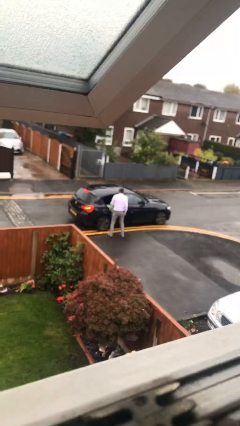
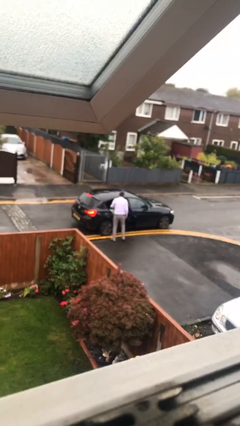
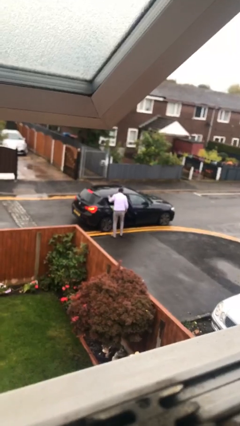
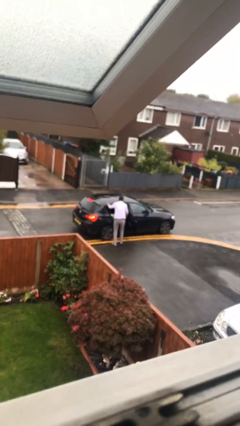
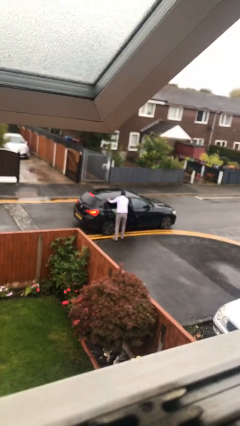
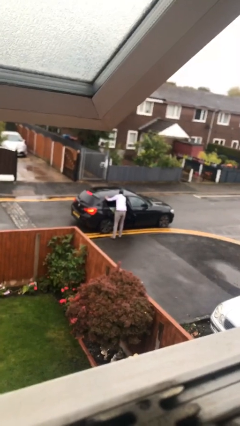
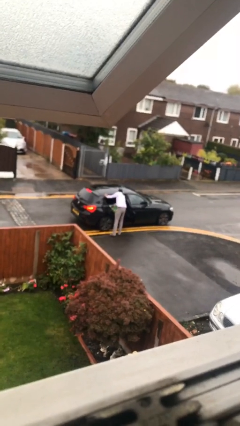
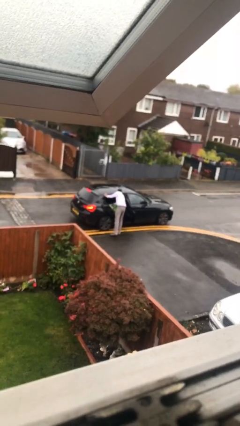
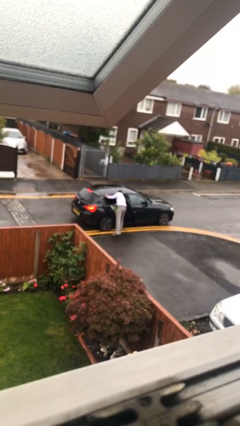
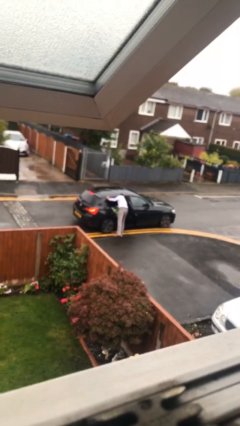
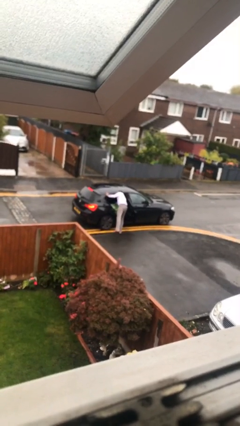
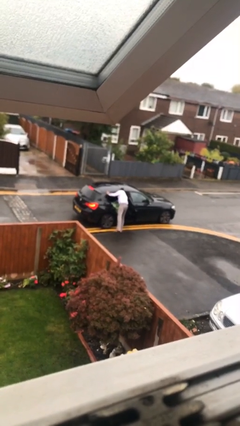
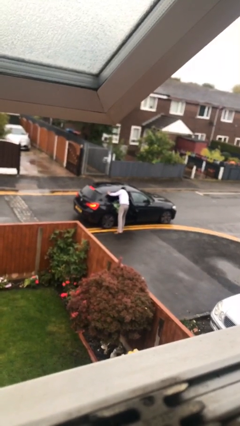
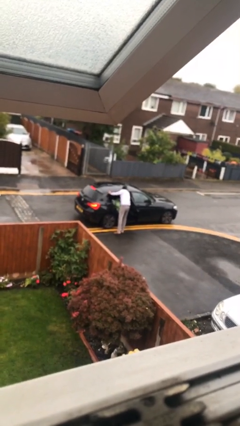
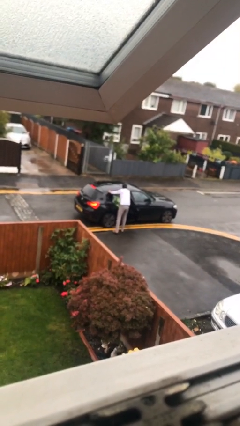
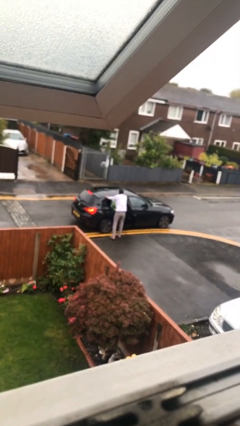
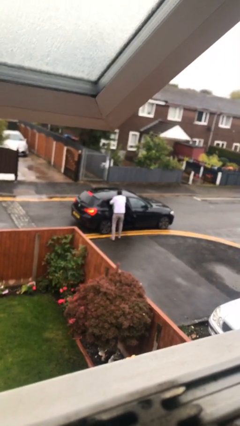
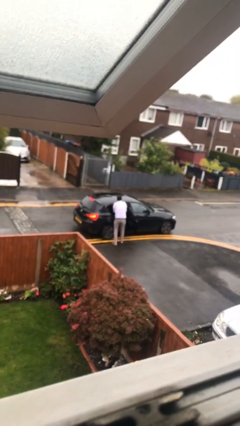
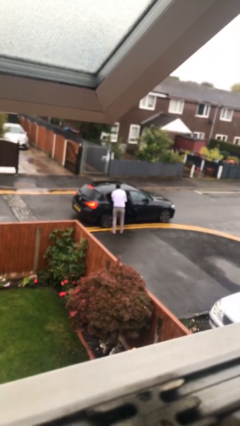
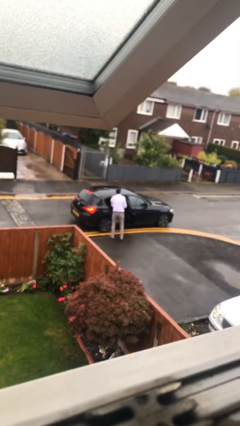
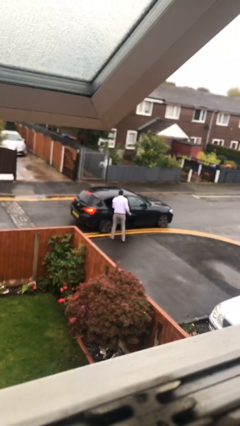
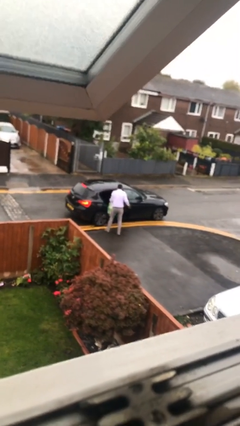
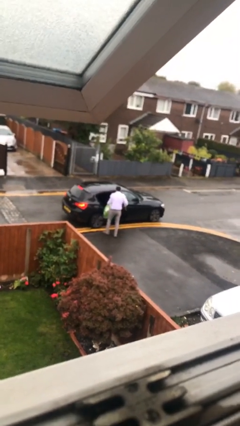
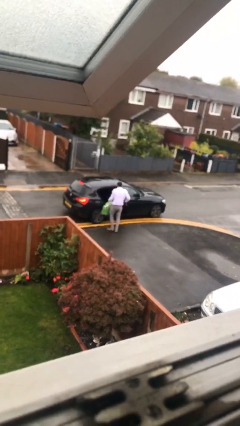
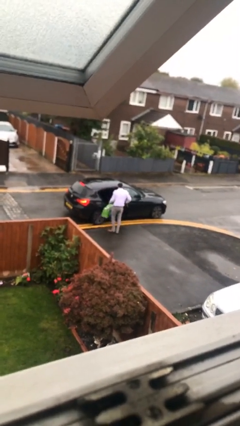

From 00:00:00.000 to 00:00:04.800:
person unloads car

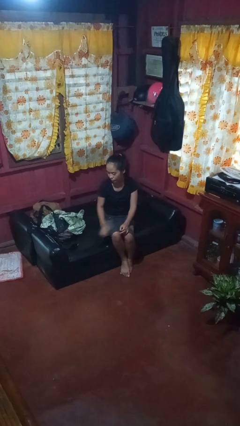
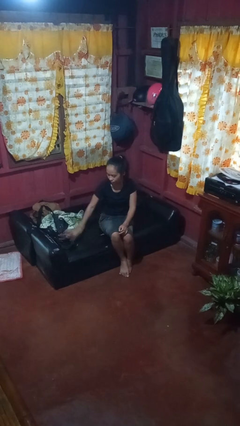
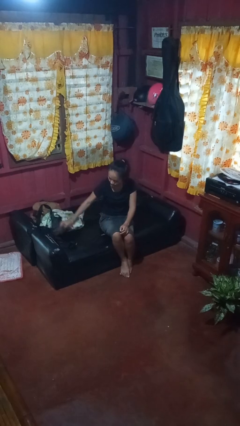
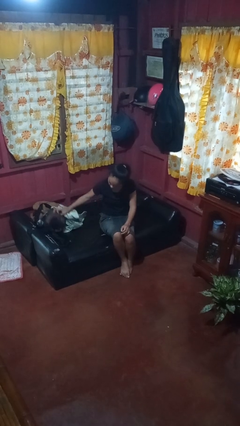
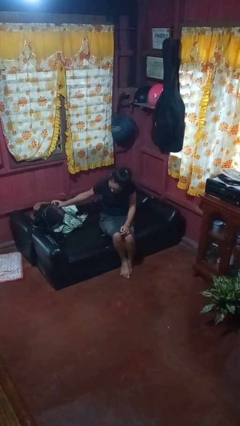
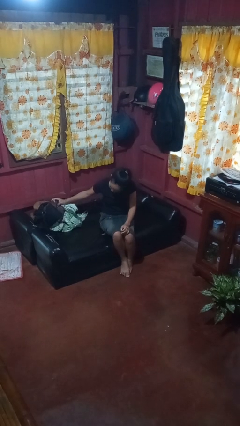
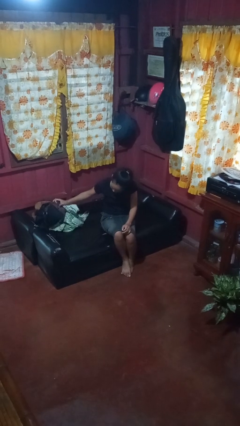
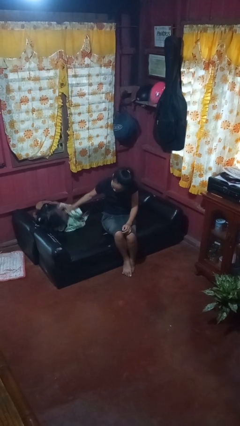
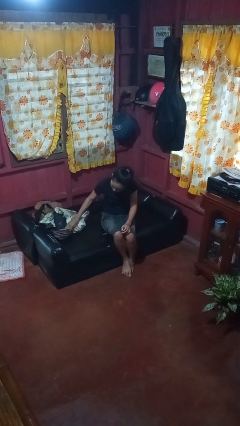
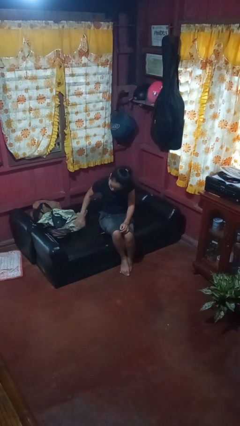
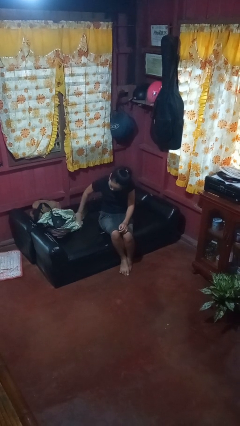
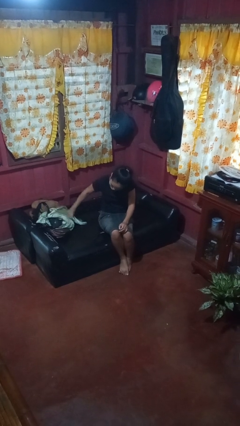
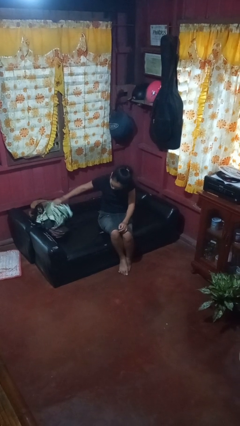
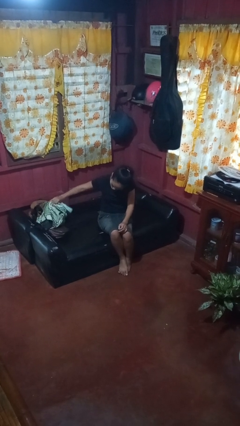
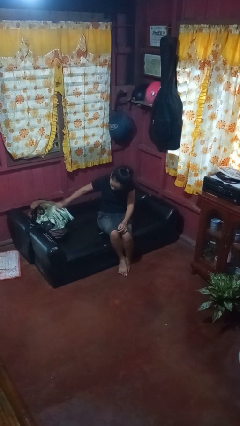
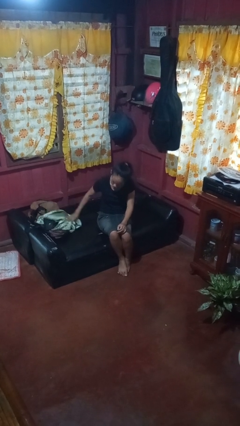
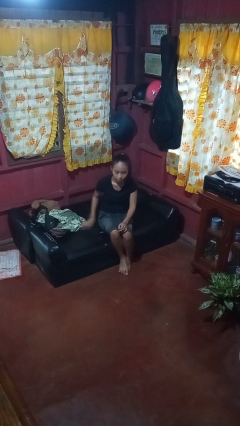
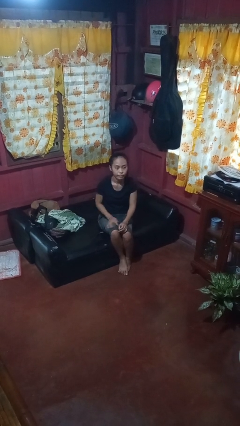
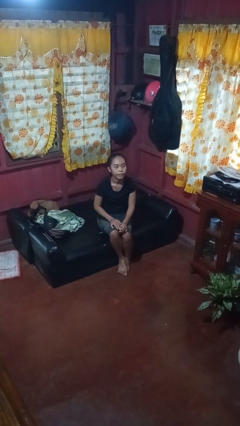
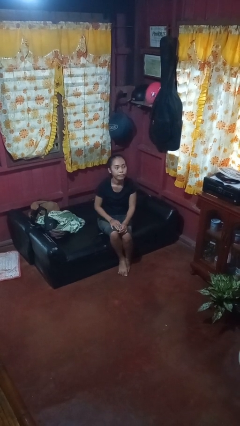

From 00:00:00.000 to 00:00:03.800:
person searches in couch

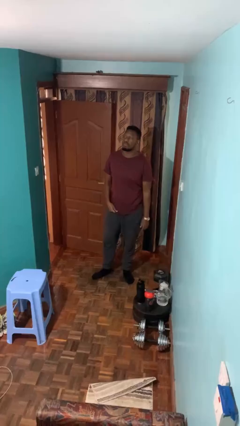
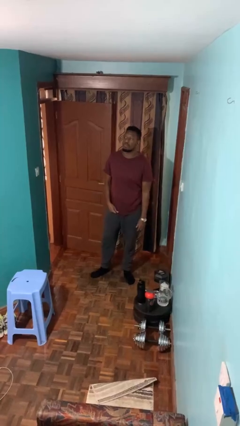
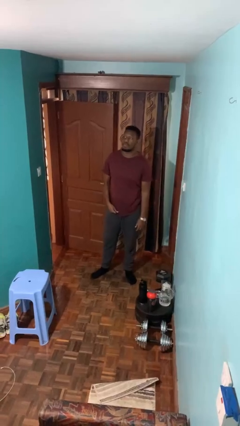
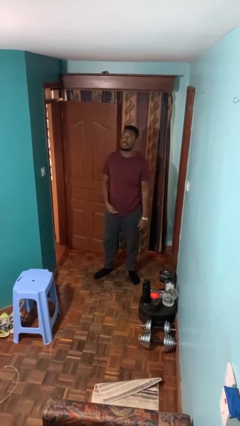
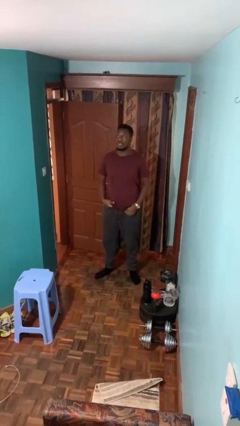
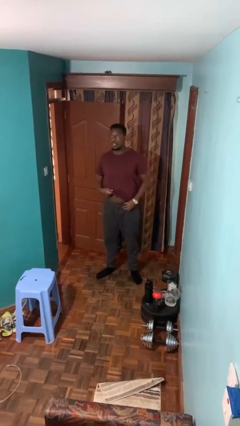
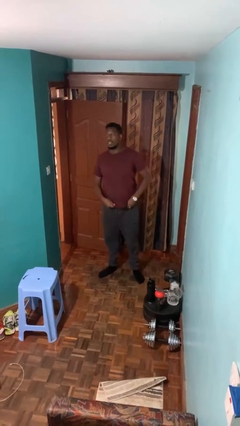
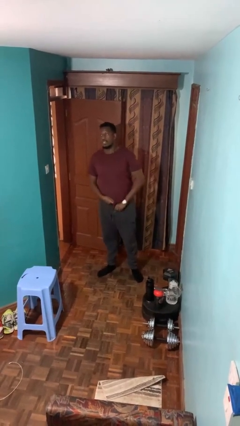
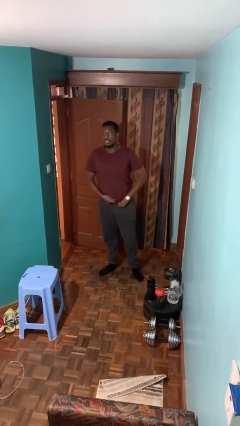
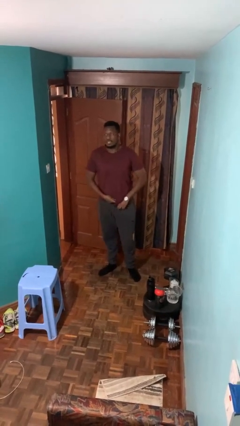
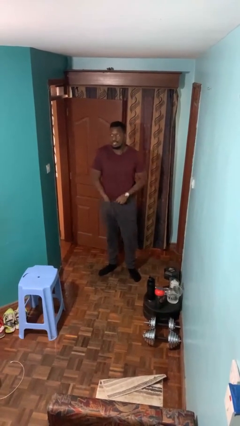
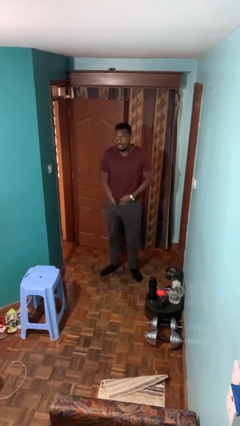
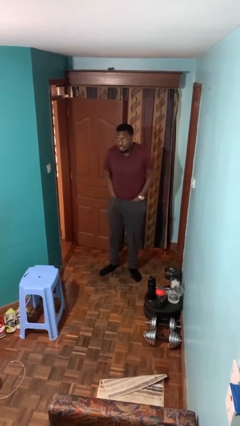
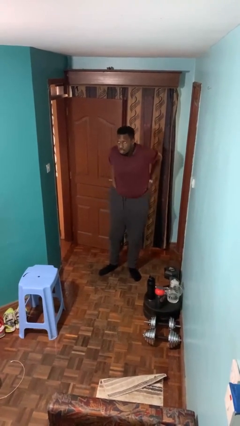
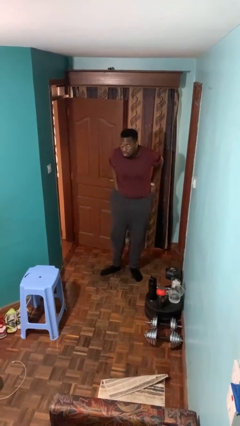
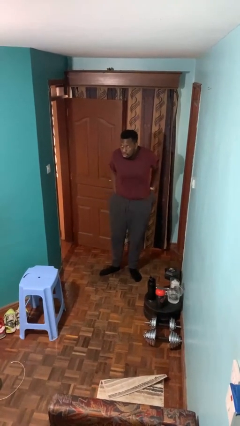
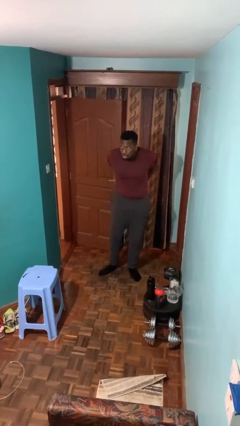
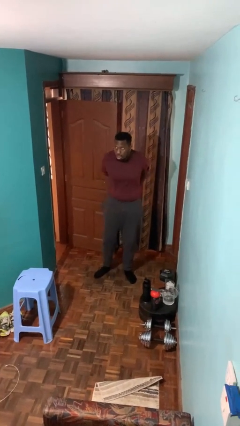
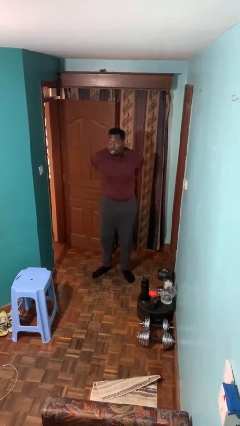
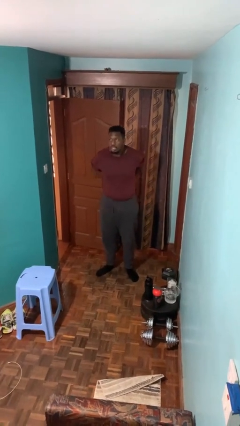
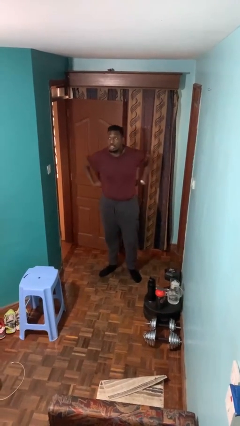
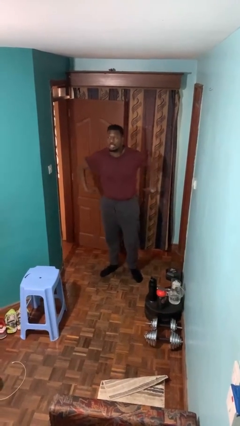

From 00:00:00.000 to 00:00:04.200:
person tucks in shirt

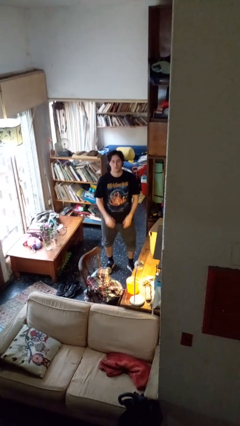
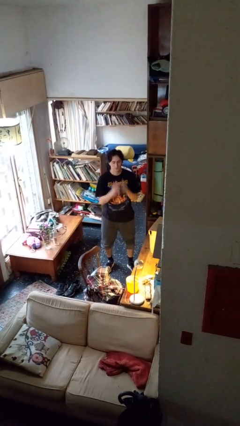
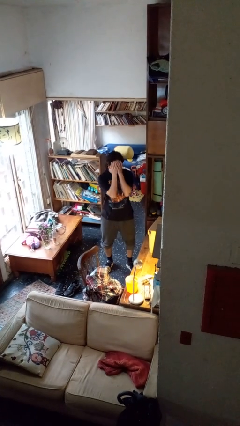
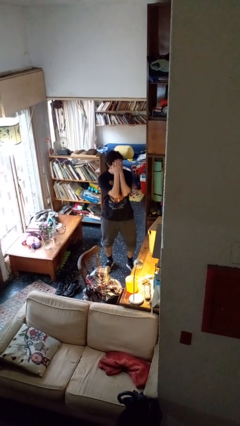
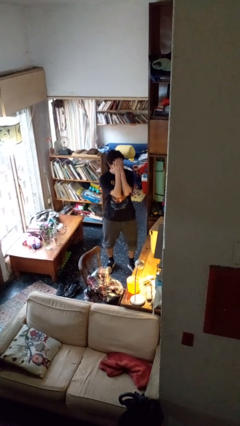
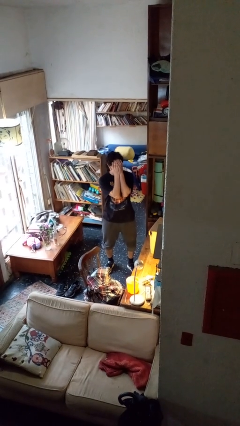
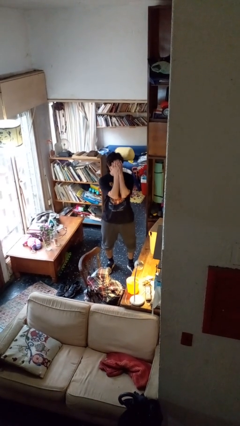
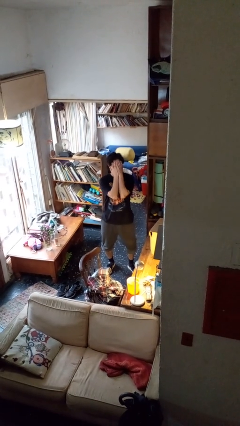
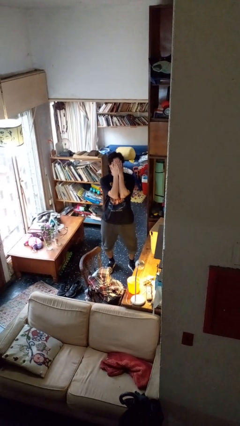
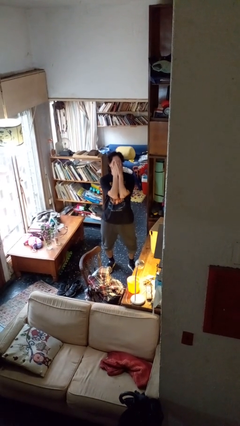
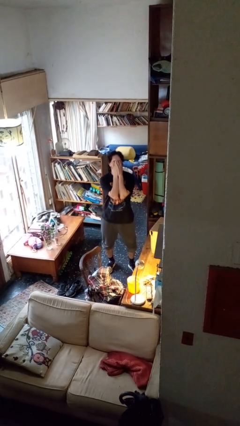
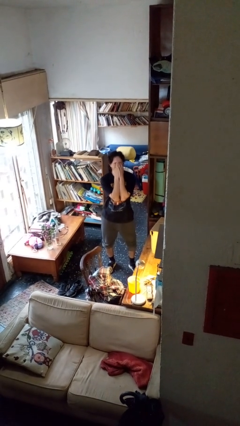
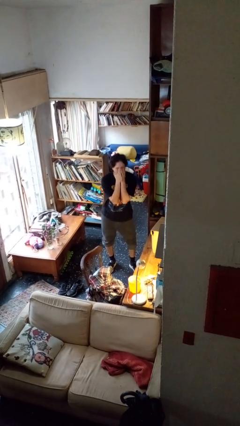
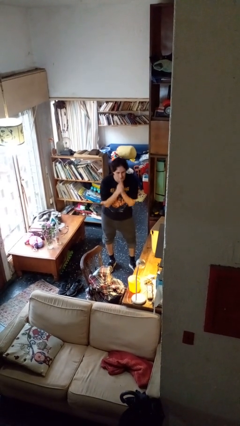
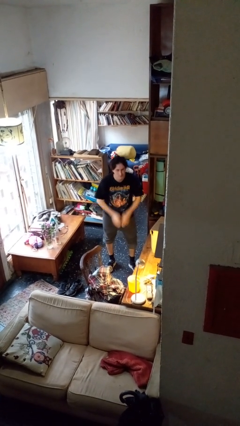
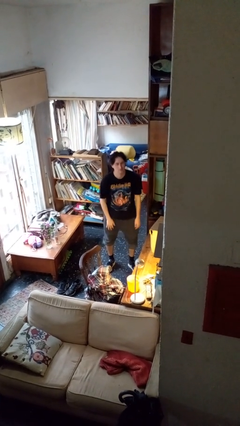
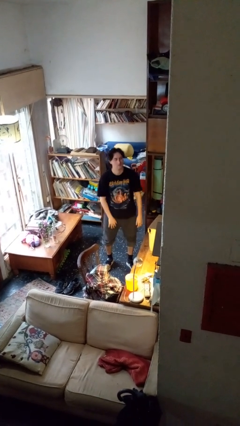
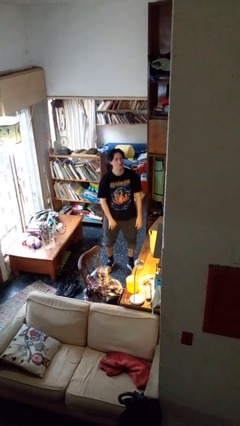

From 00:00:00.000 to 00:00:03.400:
person covers face with hands

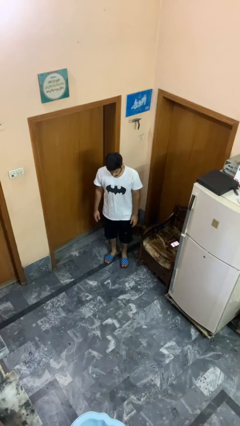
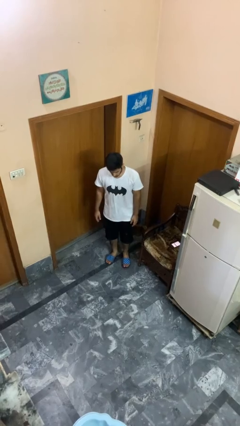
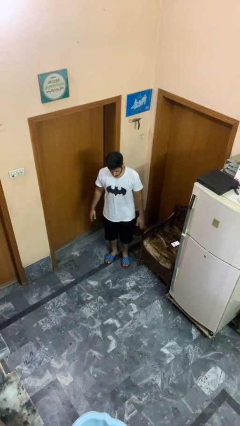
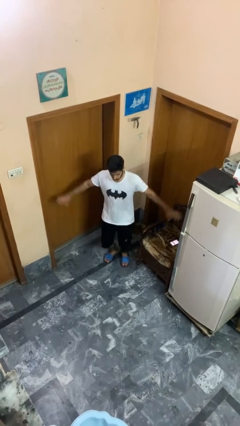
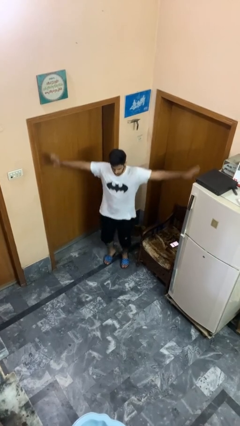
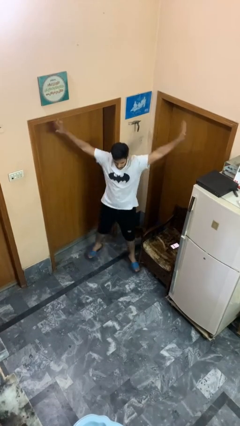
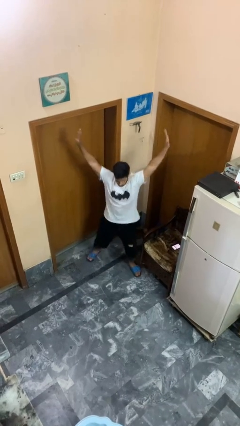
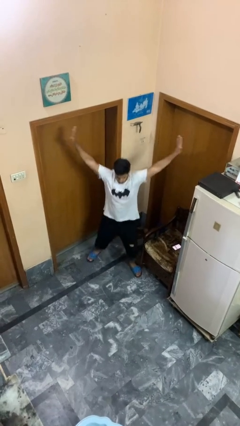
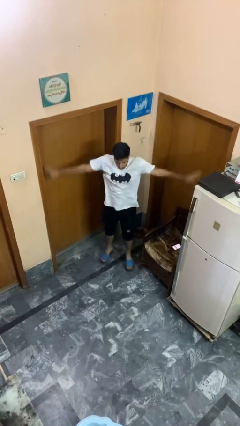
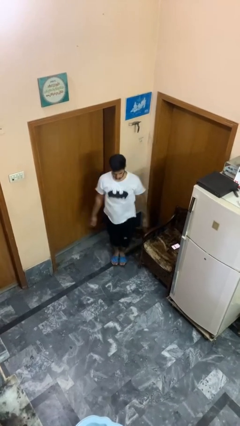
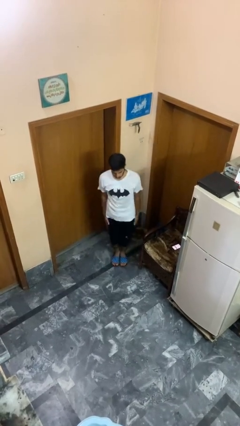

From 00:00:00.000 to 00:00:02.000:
person exercises with jumping jacks
